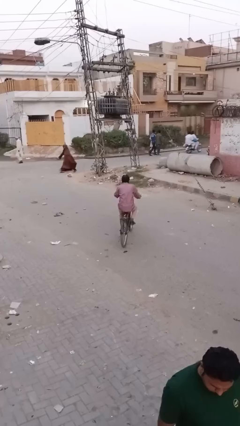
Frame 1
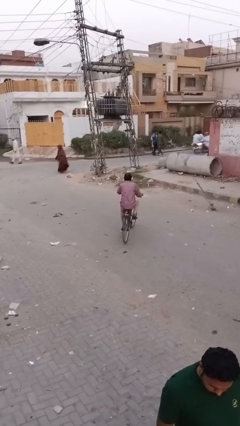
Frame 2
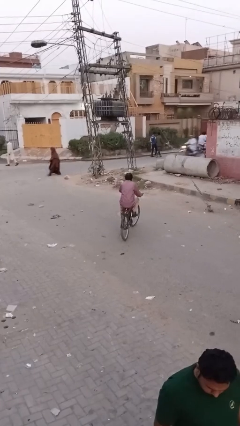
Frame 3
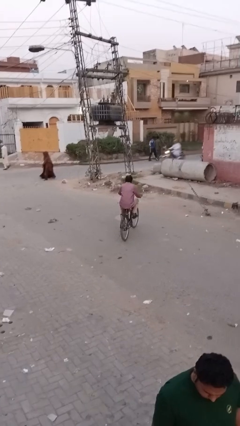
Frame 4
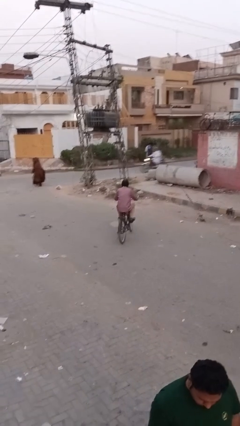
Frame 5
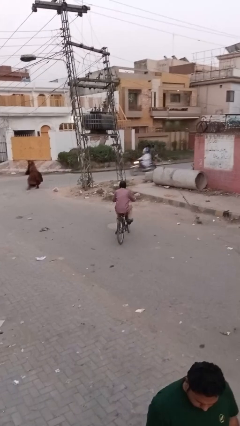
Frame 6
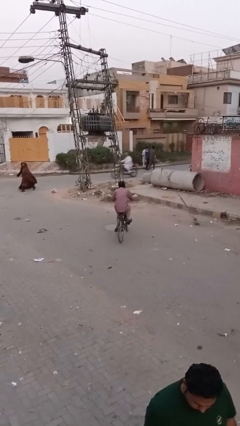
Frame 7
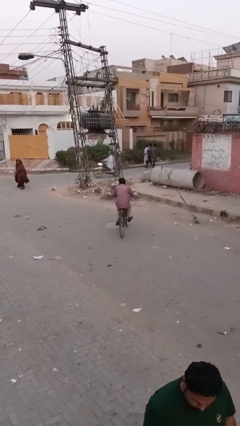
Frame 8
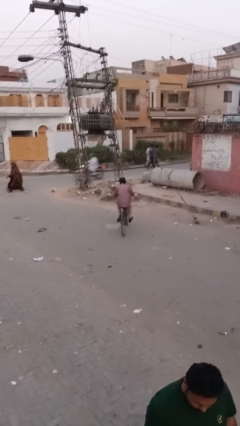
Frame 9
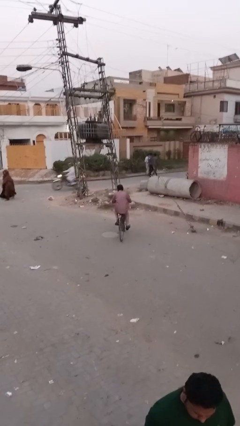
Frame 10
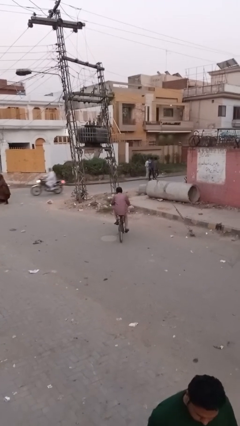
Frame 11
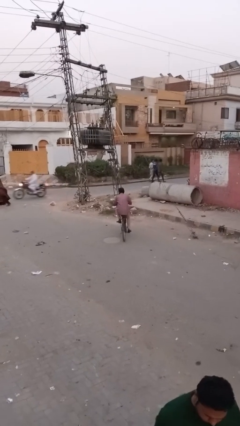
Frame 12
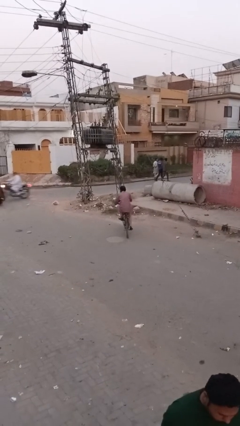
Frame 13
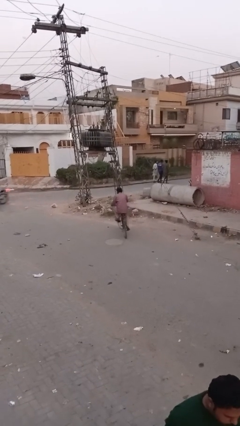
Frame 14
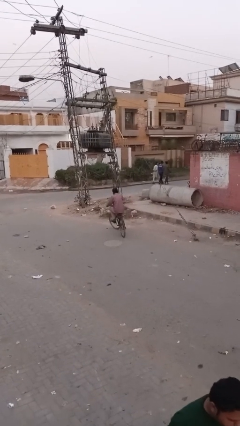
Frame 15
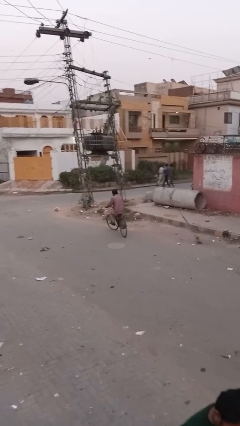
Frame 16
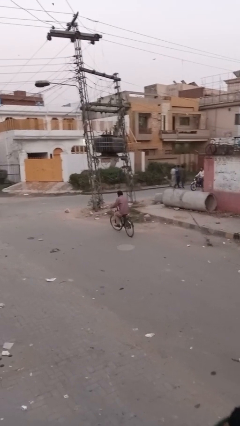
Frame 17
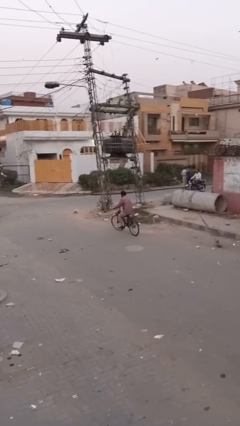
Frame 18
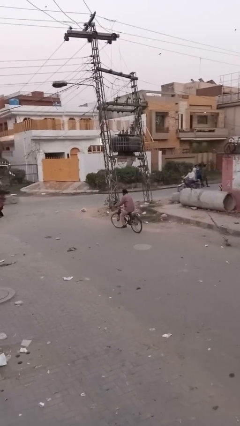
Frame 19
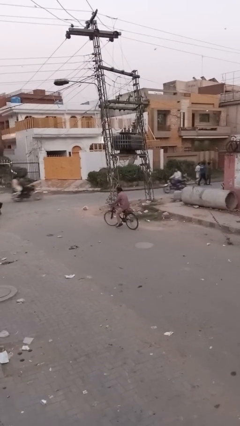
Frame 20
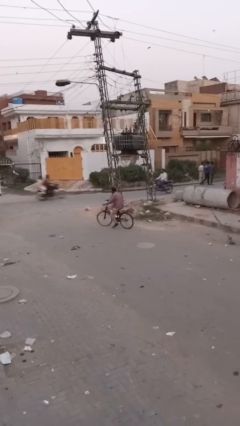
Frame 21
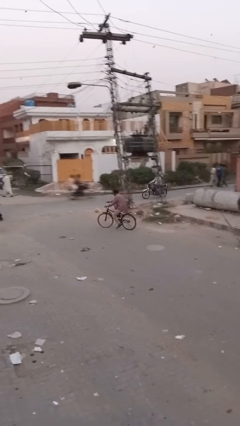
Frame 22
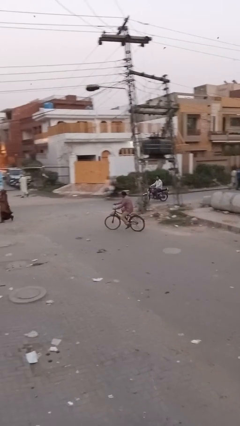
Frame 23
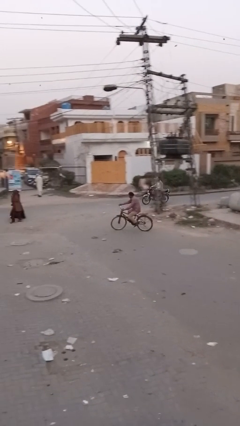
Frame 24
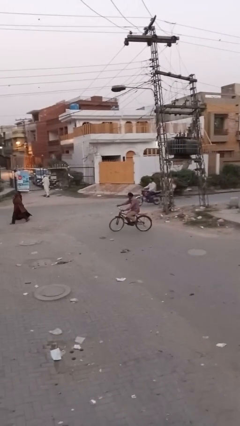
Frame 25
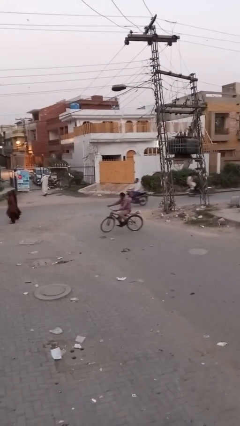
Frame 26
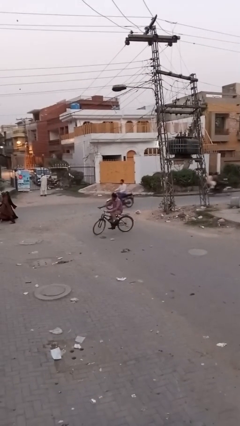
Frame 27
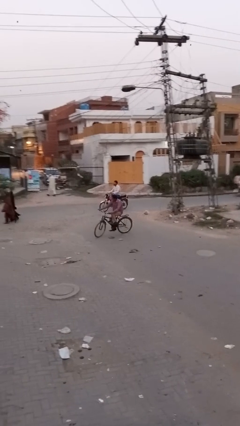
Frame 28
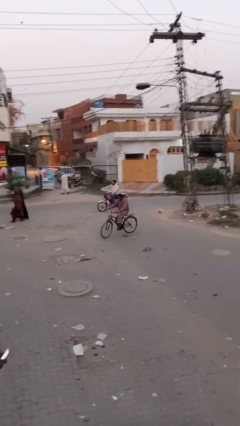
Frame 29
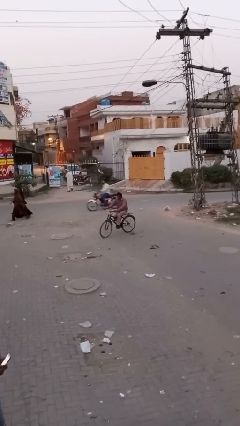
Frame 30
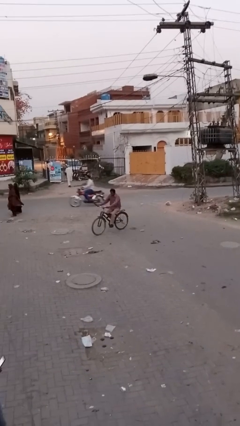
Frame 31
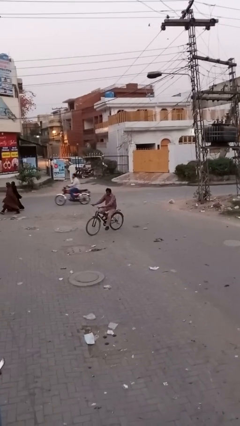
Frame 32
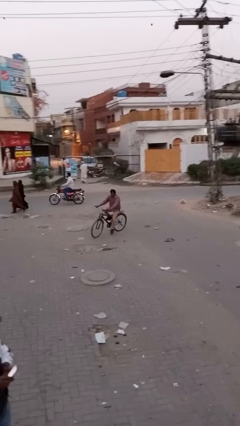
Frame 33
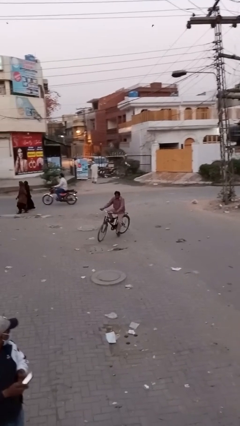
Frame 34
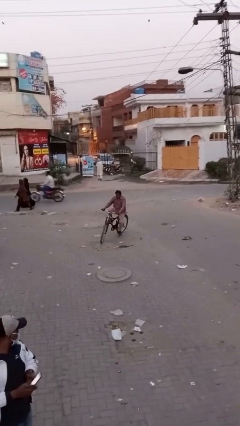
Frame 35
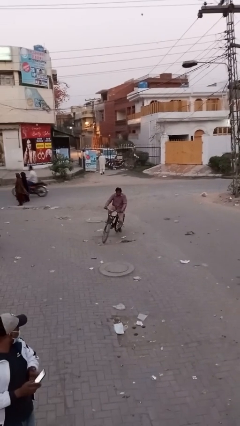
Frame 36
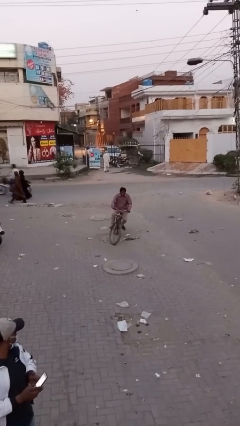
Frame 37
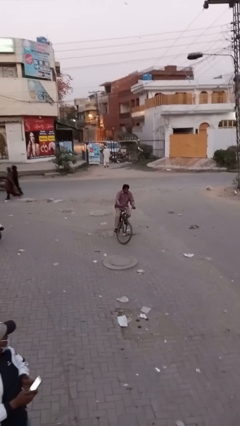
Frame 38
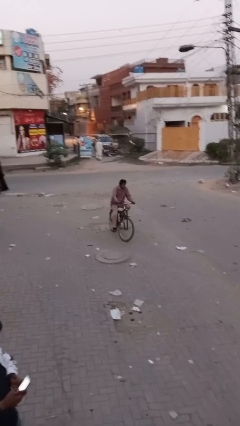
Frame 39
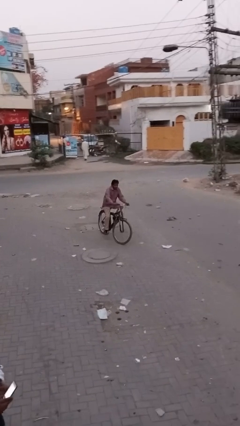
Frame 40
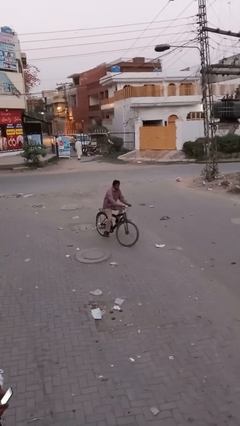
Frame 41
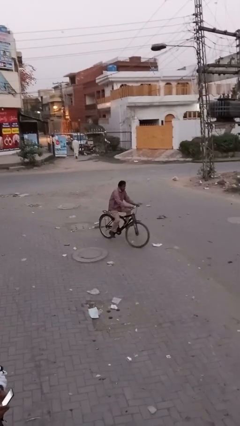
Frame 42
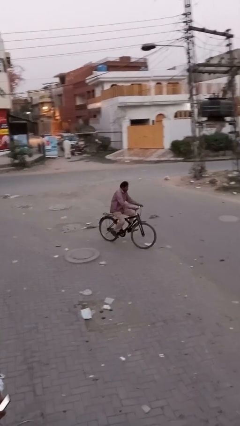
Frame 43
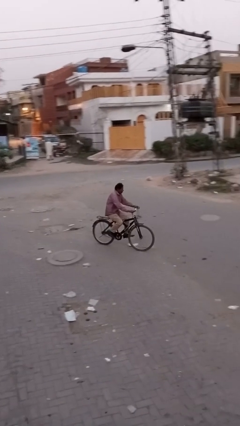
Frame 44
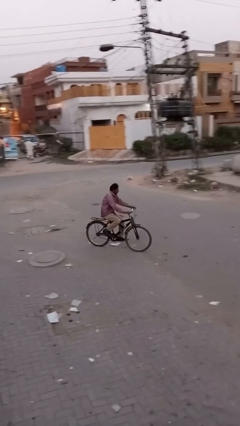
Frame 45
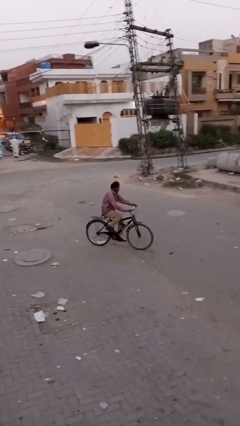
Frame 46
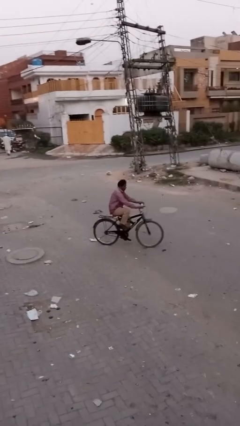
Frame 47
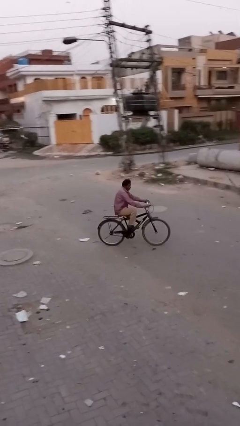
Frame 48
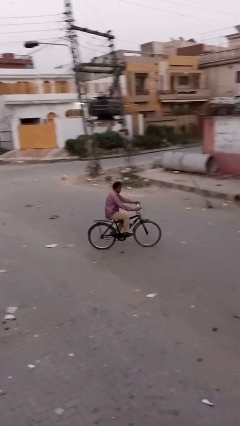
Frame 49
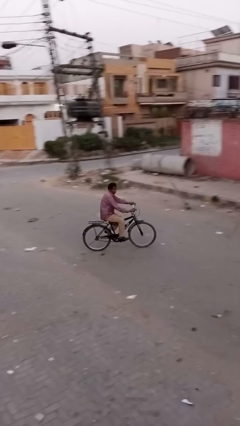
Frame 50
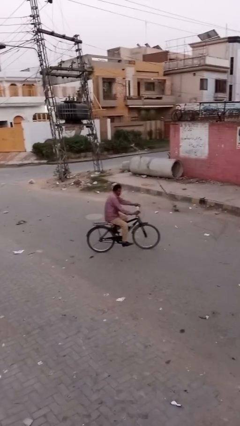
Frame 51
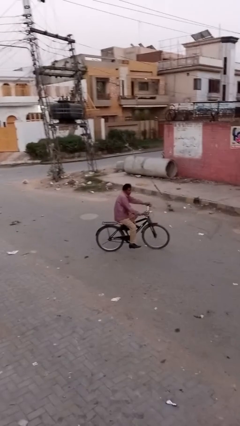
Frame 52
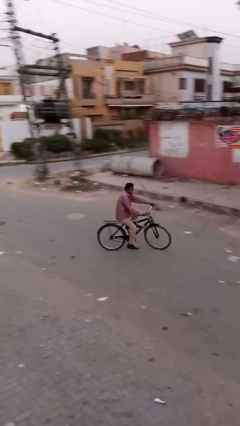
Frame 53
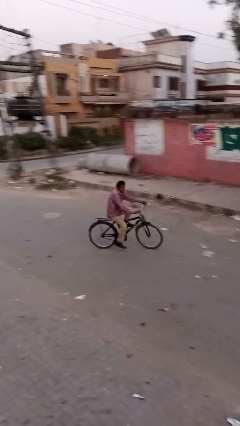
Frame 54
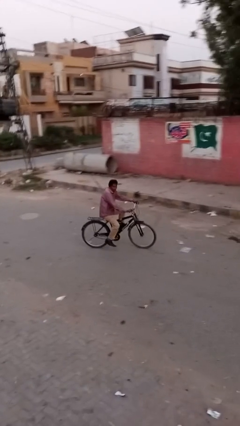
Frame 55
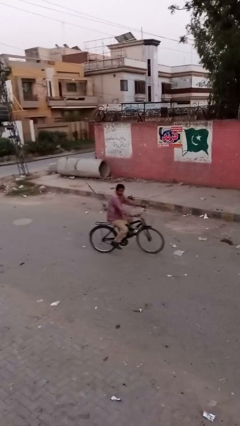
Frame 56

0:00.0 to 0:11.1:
person rides bicycle

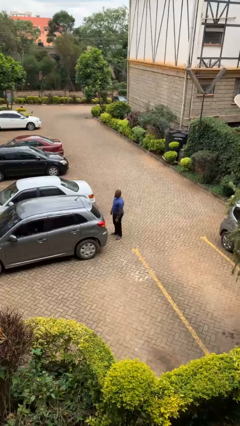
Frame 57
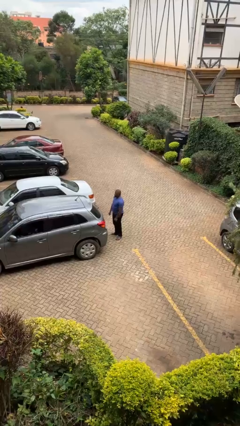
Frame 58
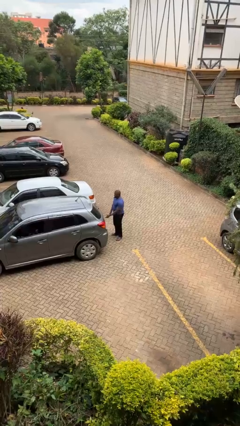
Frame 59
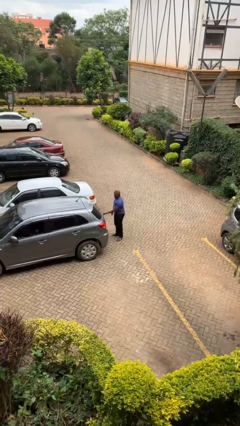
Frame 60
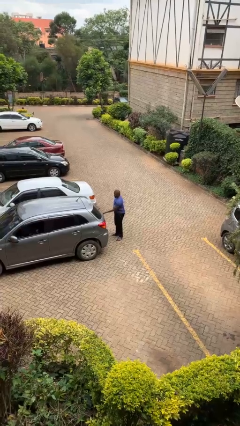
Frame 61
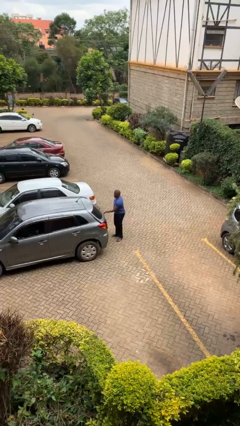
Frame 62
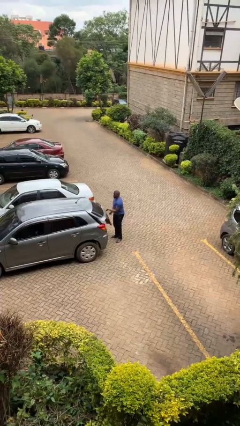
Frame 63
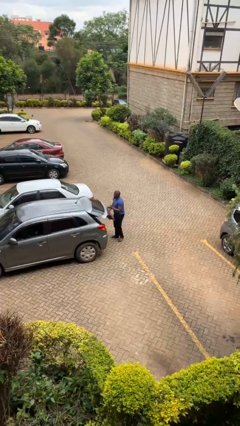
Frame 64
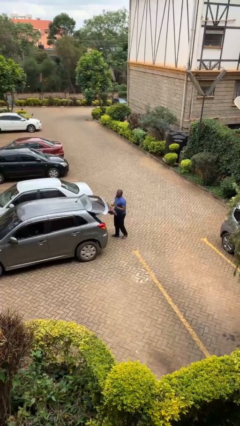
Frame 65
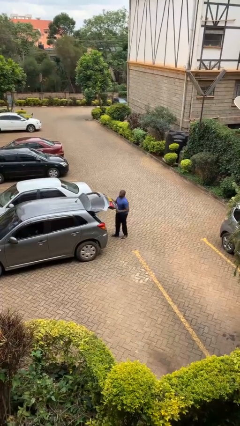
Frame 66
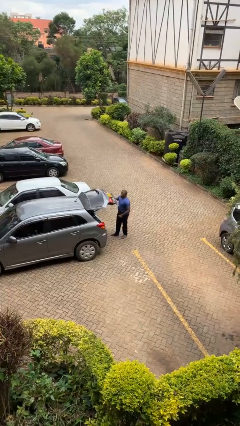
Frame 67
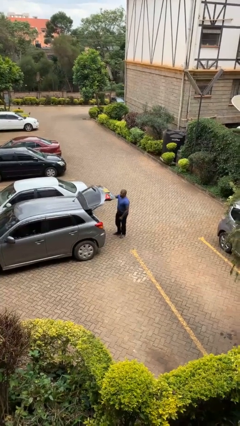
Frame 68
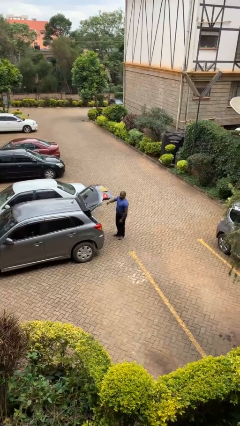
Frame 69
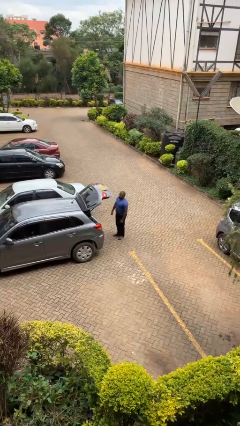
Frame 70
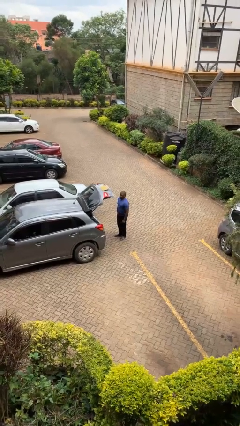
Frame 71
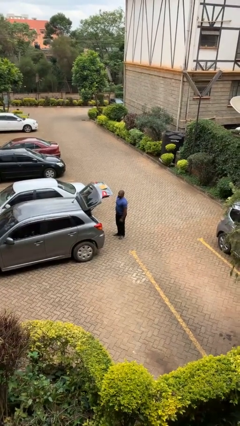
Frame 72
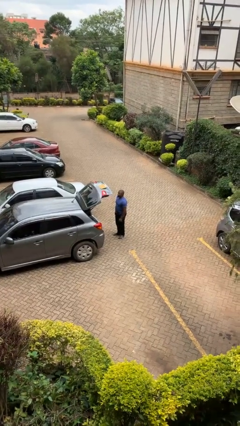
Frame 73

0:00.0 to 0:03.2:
person opens car trunk

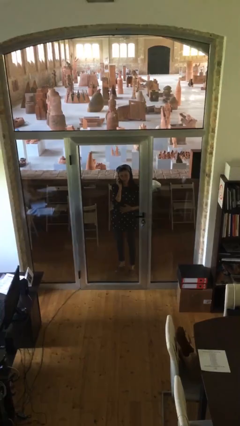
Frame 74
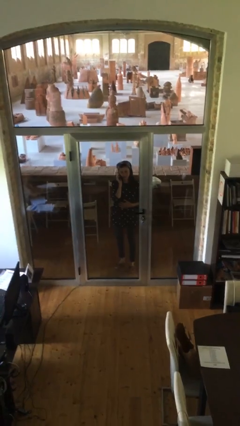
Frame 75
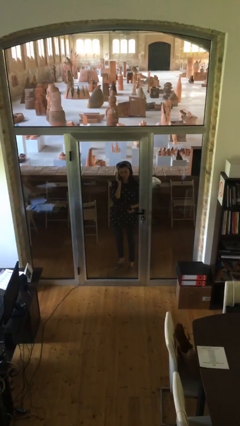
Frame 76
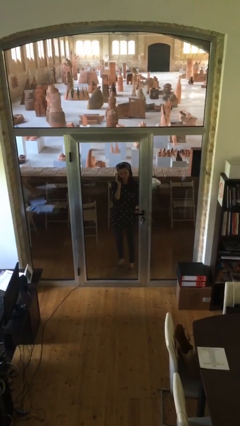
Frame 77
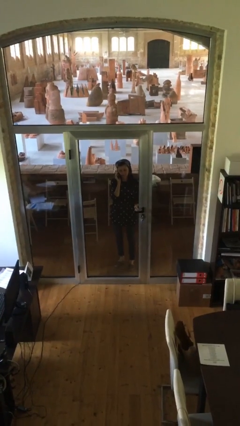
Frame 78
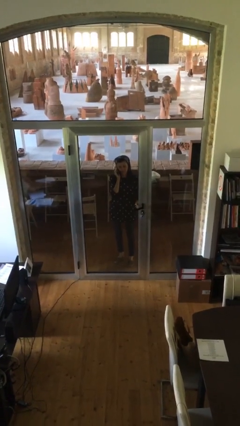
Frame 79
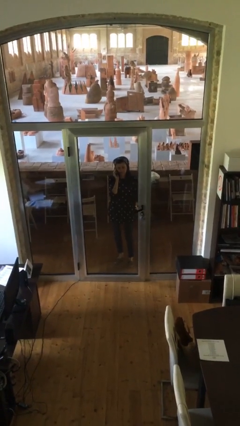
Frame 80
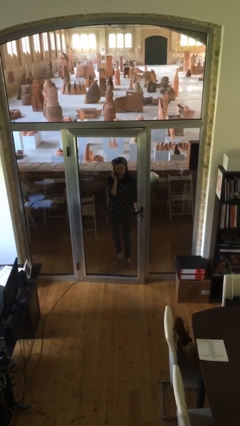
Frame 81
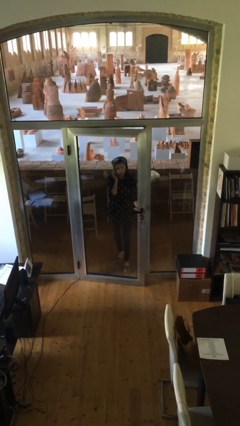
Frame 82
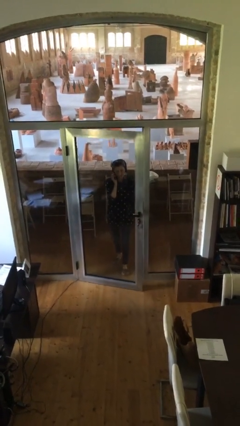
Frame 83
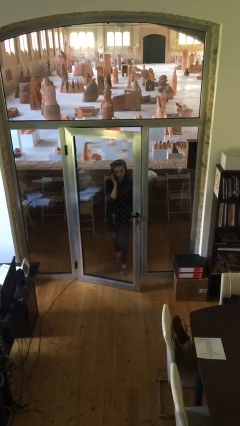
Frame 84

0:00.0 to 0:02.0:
person opens facility door

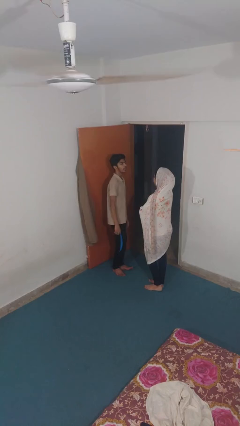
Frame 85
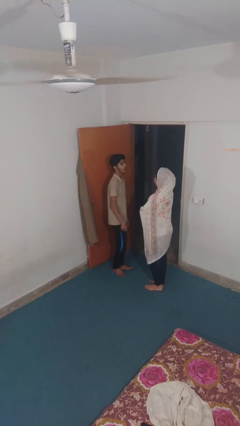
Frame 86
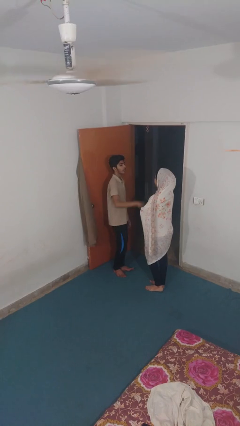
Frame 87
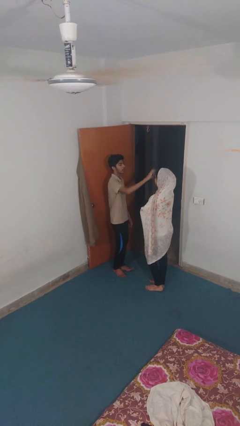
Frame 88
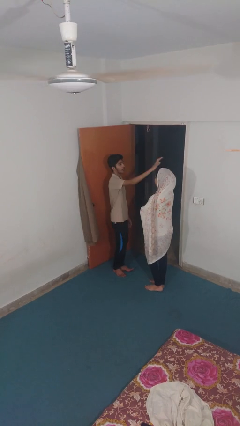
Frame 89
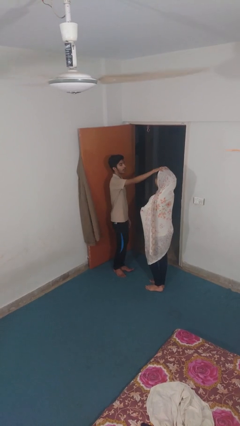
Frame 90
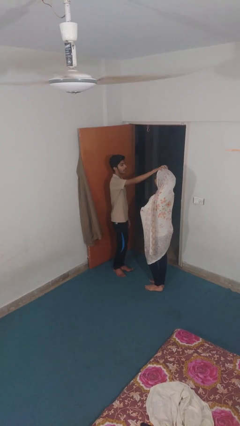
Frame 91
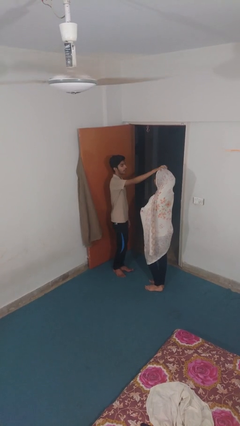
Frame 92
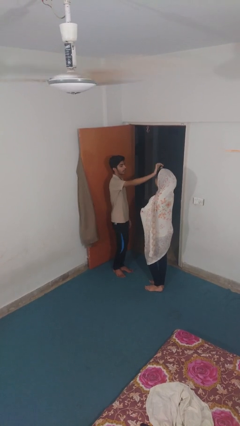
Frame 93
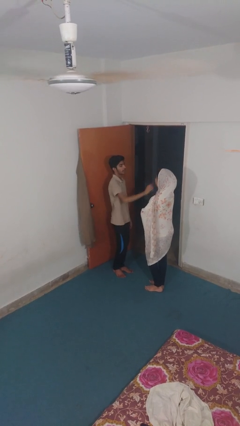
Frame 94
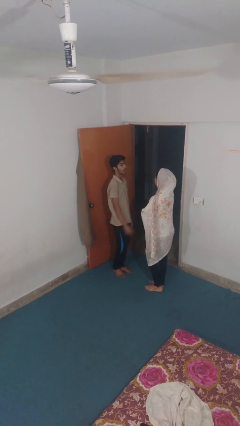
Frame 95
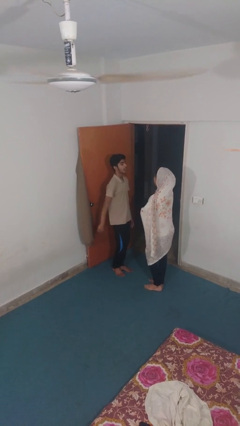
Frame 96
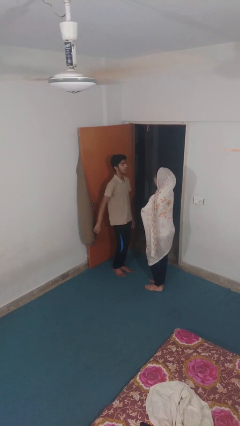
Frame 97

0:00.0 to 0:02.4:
person grabs person by hair
